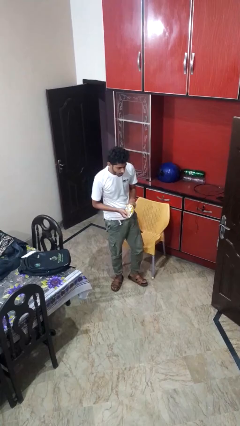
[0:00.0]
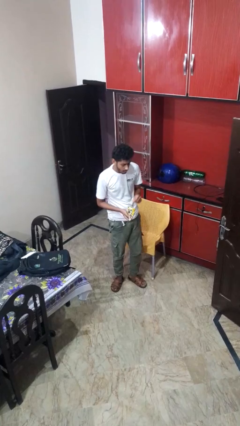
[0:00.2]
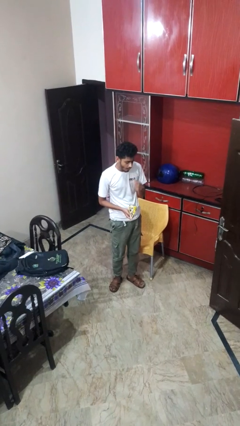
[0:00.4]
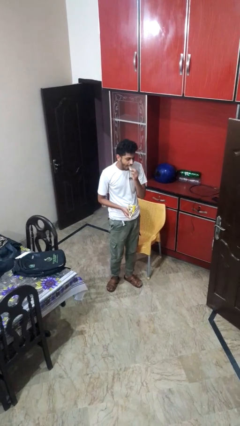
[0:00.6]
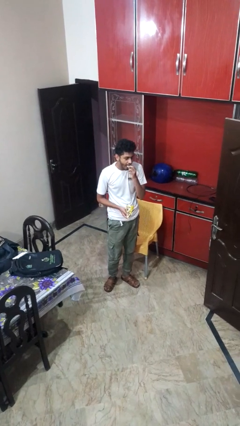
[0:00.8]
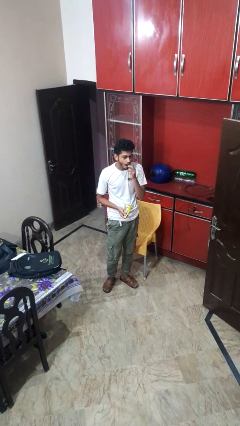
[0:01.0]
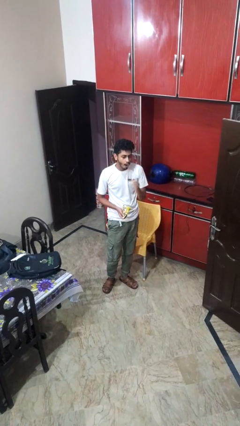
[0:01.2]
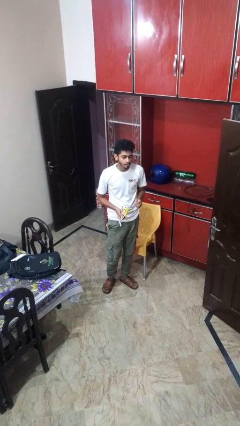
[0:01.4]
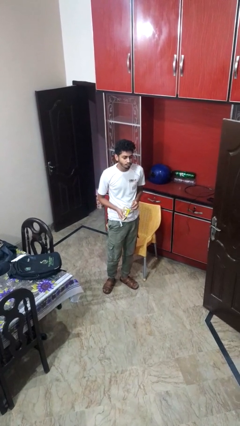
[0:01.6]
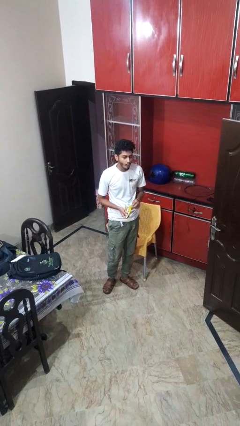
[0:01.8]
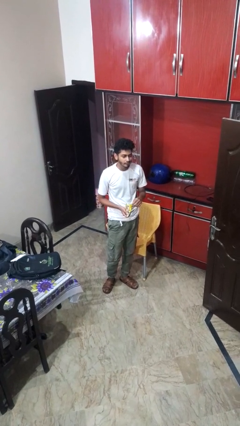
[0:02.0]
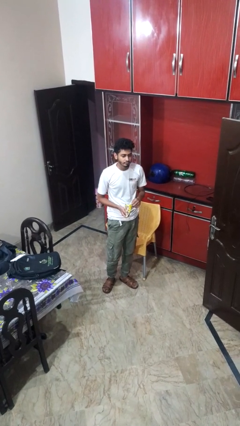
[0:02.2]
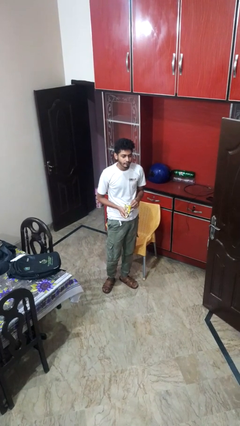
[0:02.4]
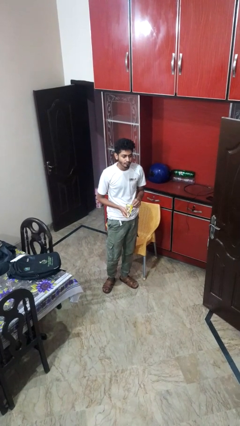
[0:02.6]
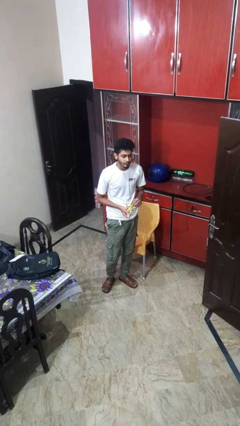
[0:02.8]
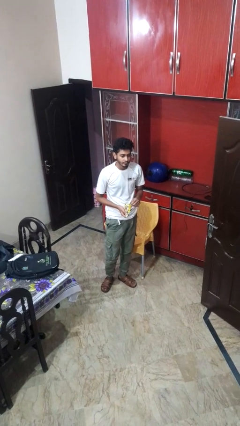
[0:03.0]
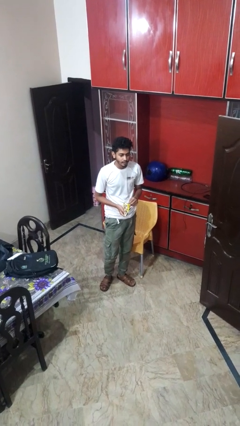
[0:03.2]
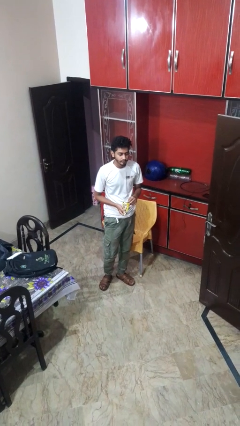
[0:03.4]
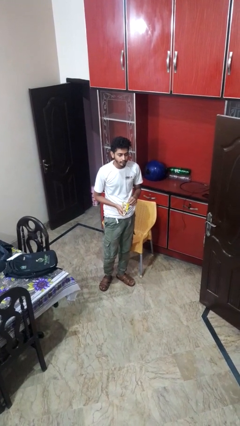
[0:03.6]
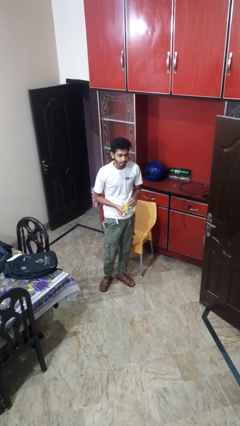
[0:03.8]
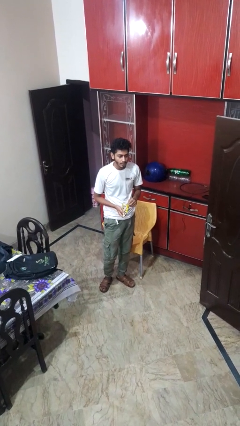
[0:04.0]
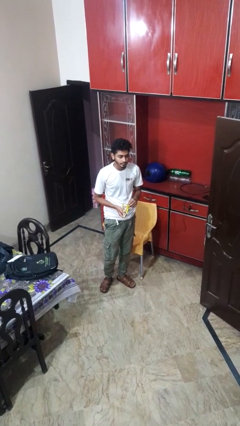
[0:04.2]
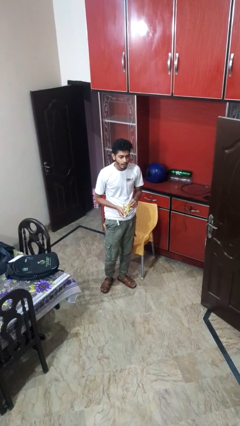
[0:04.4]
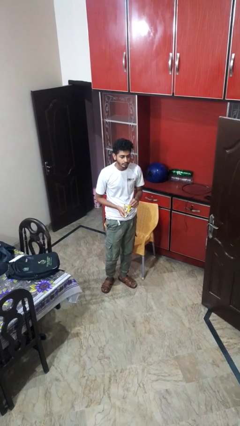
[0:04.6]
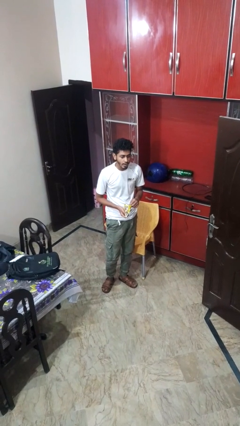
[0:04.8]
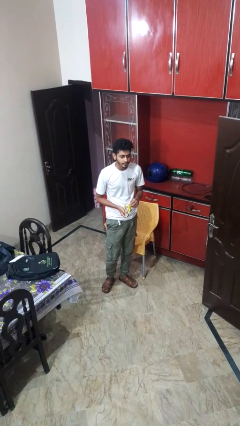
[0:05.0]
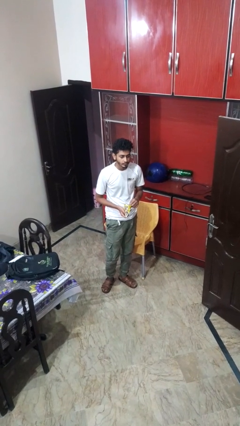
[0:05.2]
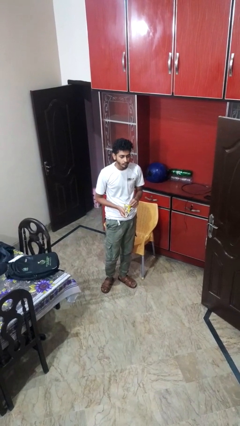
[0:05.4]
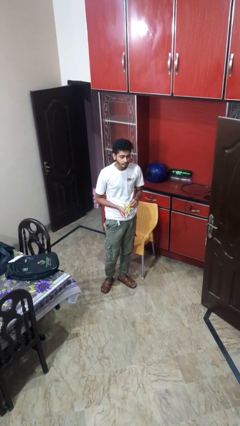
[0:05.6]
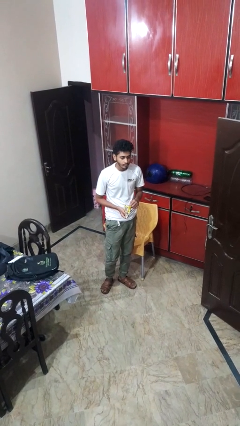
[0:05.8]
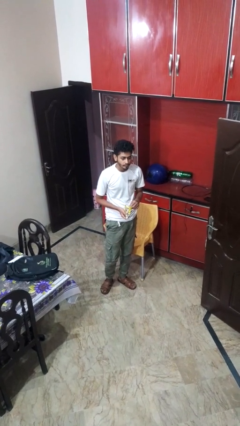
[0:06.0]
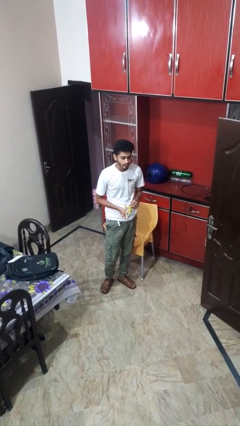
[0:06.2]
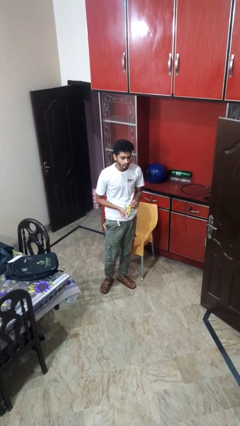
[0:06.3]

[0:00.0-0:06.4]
person eats snack from bag

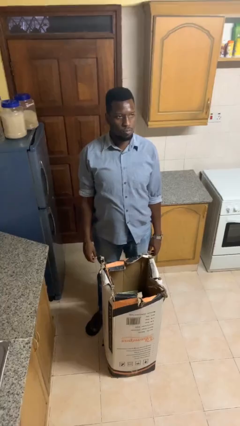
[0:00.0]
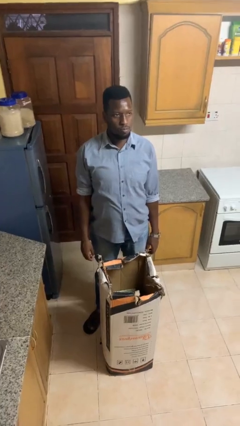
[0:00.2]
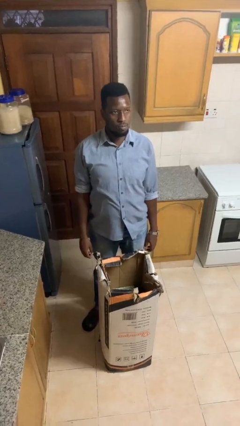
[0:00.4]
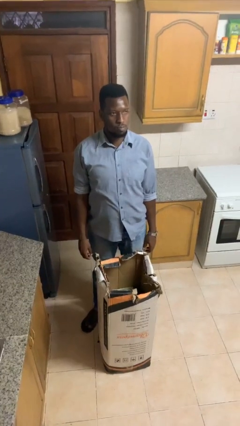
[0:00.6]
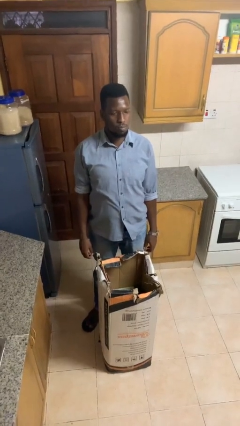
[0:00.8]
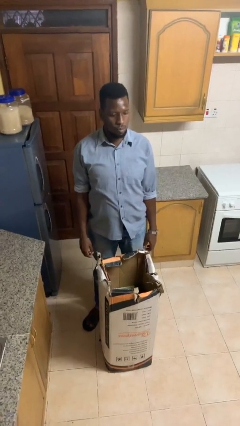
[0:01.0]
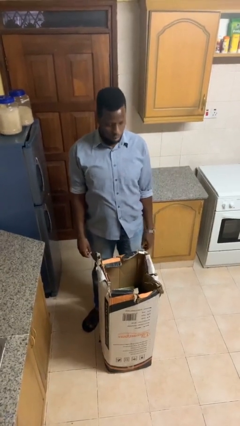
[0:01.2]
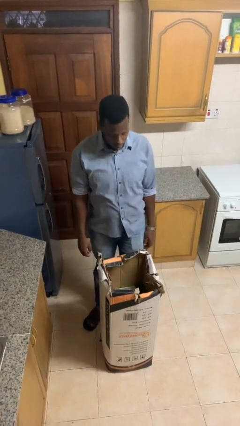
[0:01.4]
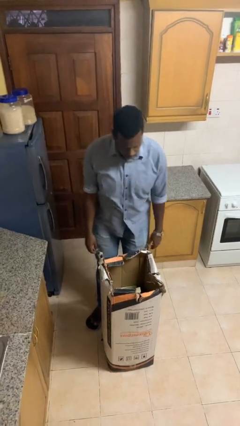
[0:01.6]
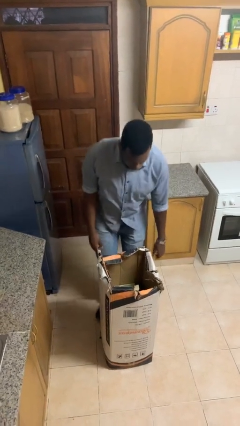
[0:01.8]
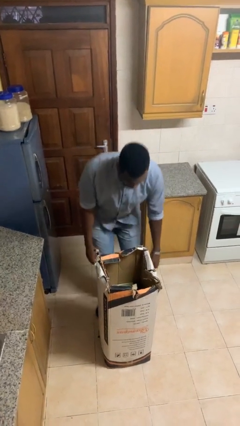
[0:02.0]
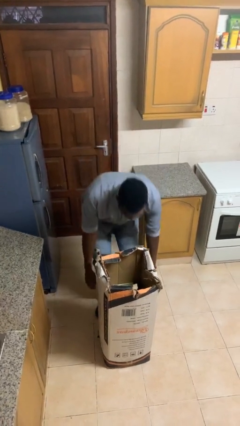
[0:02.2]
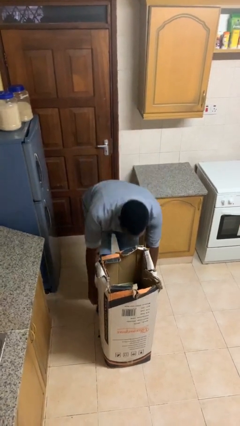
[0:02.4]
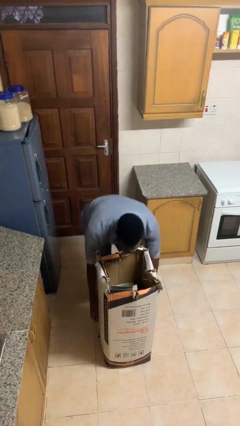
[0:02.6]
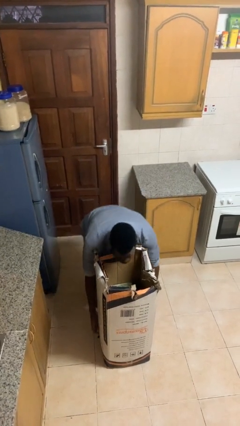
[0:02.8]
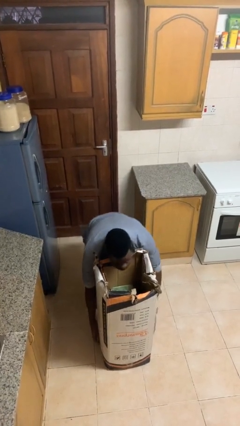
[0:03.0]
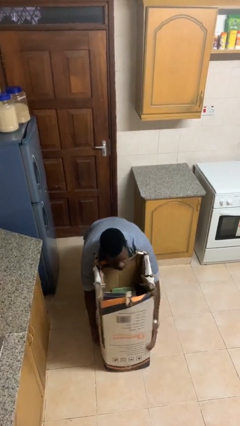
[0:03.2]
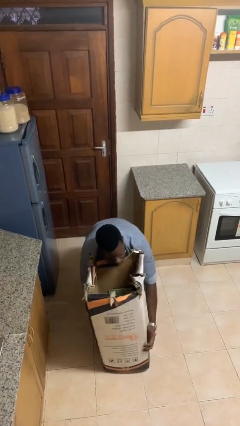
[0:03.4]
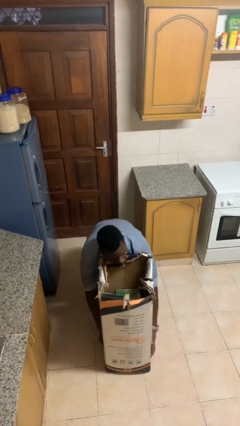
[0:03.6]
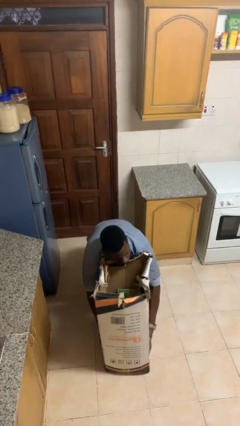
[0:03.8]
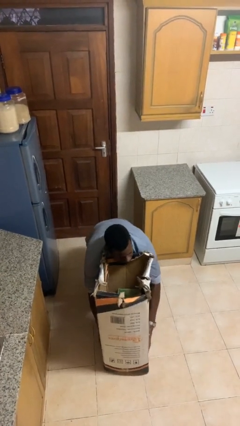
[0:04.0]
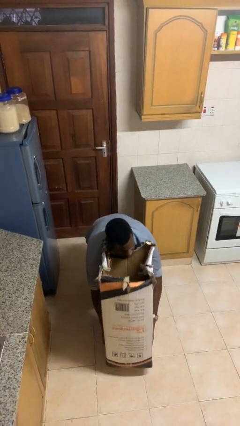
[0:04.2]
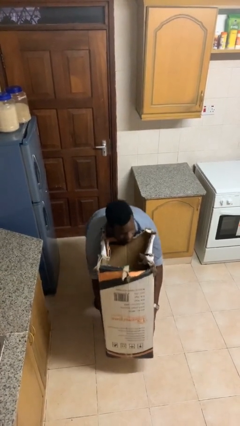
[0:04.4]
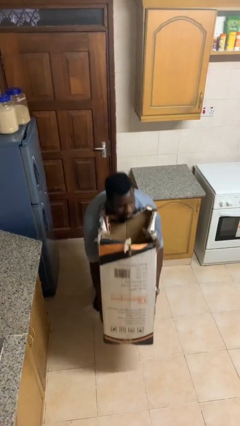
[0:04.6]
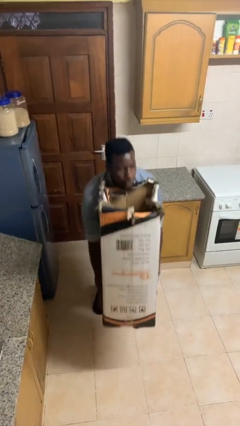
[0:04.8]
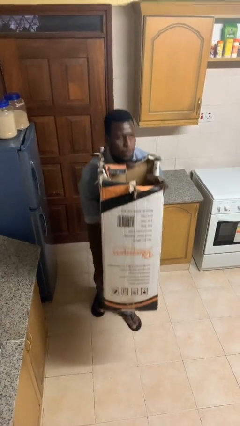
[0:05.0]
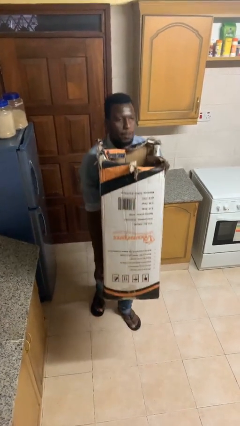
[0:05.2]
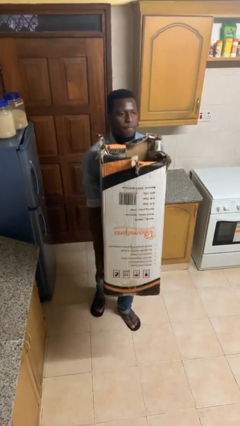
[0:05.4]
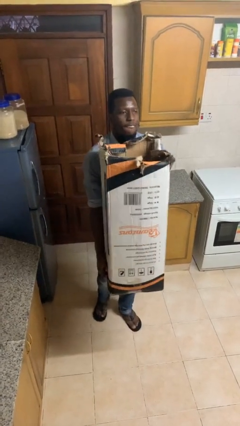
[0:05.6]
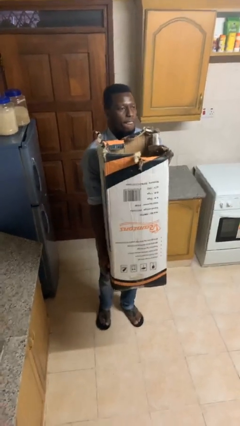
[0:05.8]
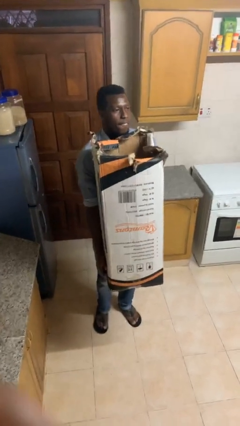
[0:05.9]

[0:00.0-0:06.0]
person picks up object from floor

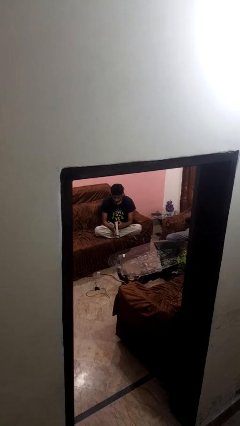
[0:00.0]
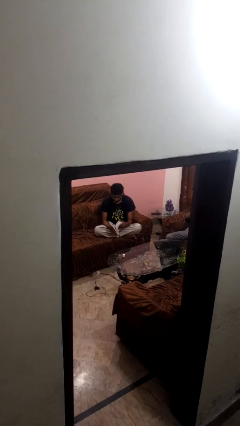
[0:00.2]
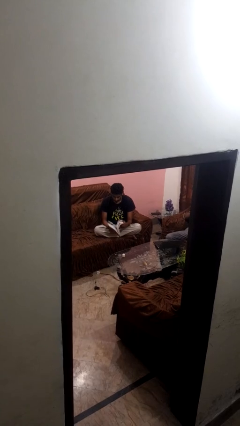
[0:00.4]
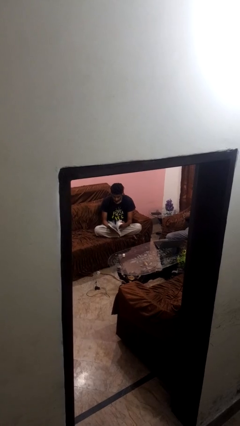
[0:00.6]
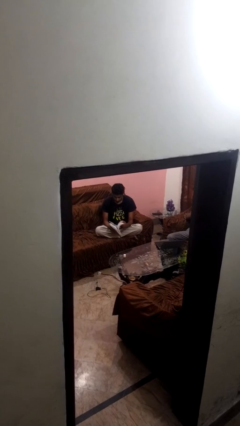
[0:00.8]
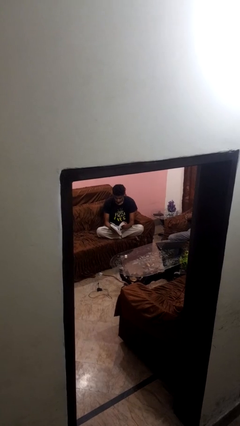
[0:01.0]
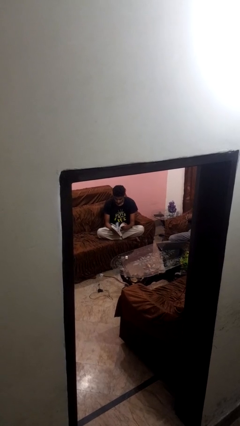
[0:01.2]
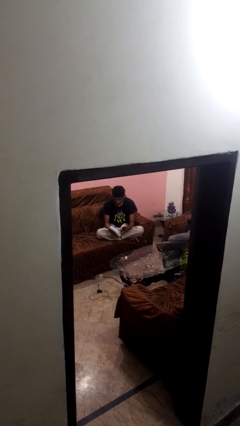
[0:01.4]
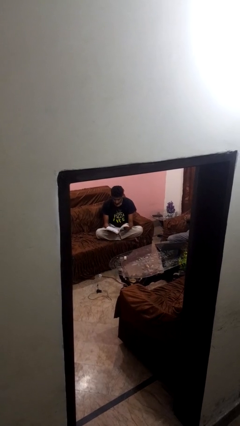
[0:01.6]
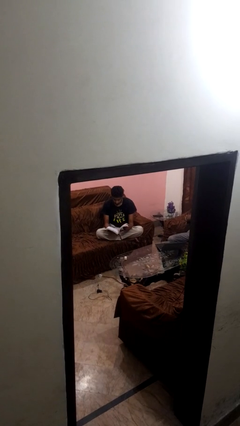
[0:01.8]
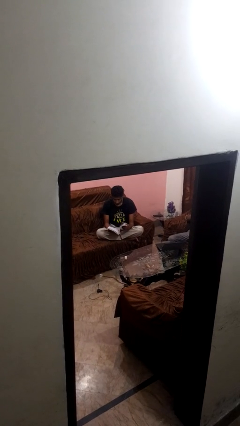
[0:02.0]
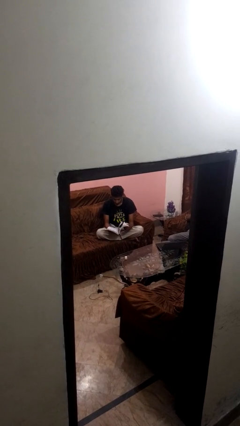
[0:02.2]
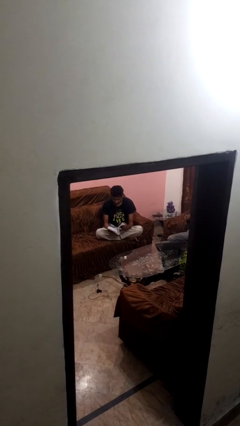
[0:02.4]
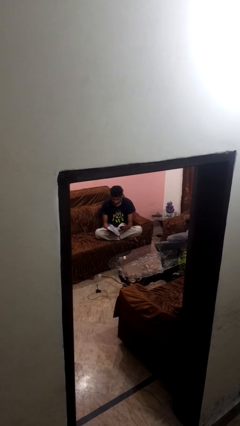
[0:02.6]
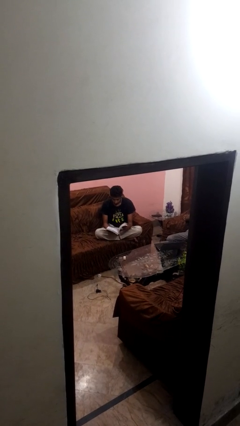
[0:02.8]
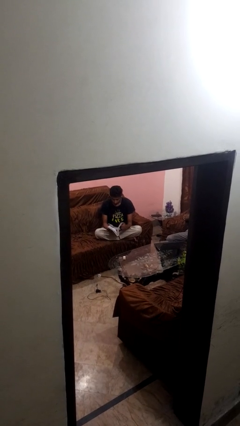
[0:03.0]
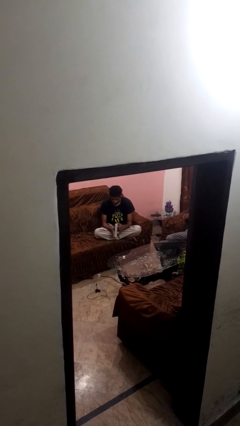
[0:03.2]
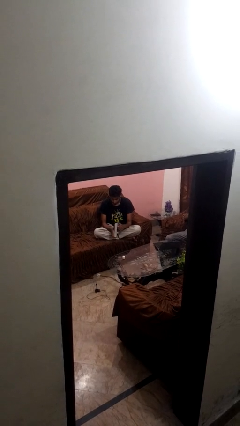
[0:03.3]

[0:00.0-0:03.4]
person reads book

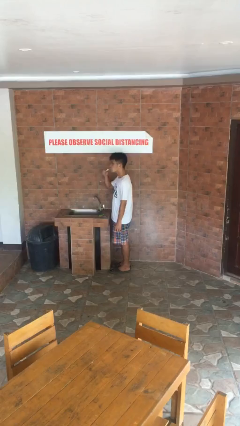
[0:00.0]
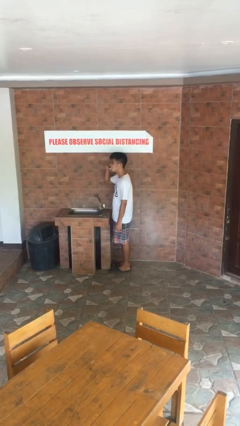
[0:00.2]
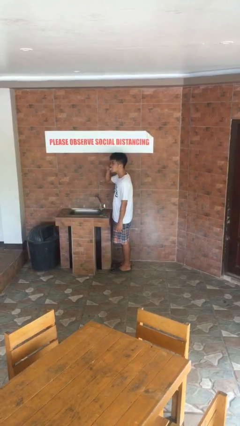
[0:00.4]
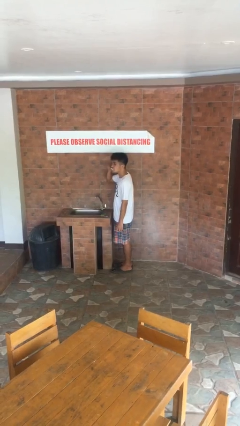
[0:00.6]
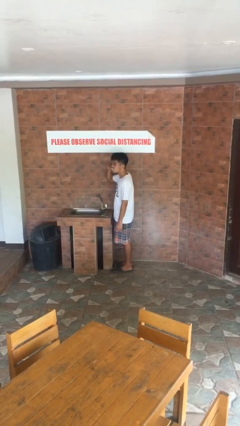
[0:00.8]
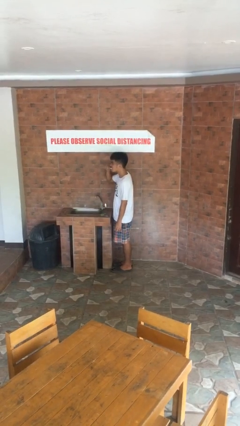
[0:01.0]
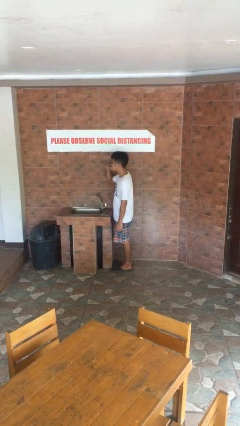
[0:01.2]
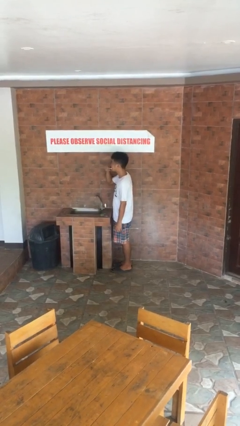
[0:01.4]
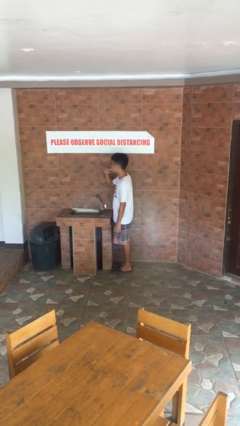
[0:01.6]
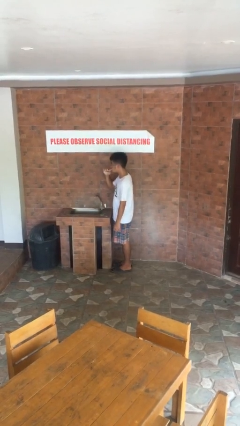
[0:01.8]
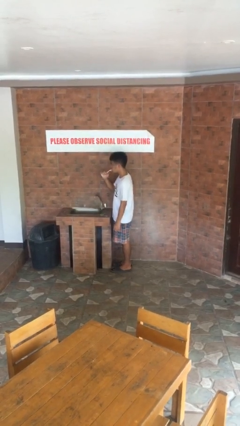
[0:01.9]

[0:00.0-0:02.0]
person brushes teeth
